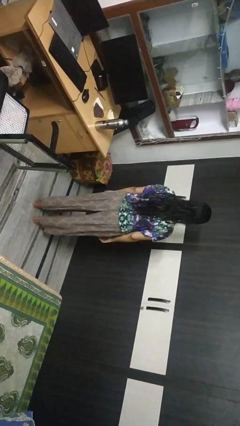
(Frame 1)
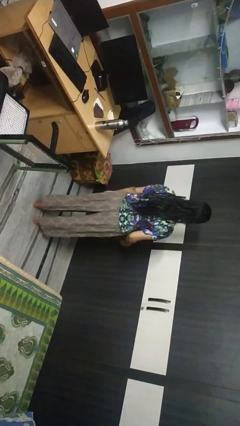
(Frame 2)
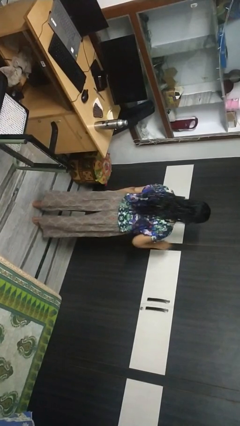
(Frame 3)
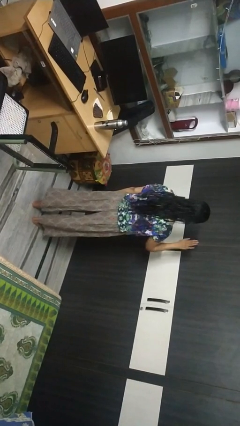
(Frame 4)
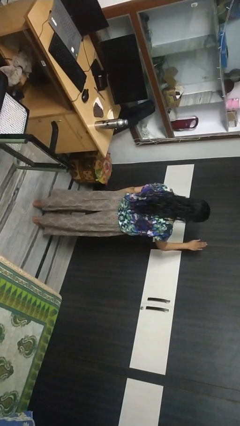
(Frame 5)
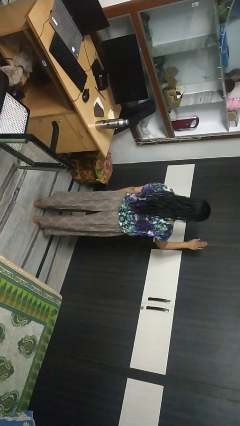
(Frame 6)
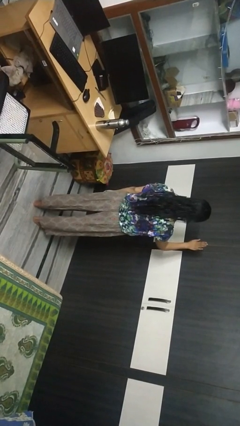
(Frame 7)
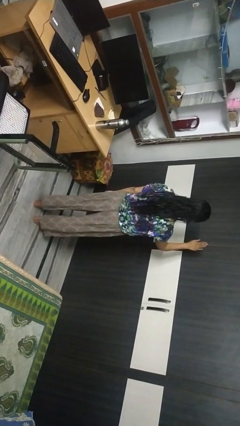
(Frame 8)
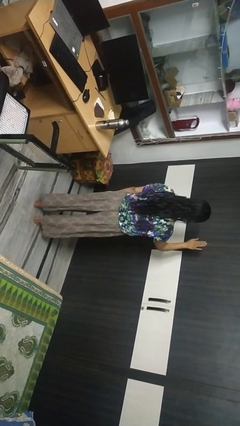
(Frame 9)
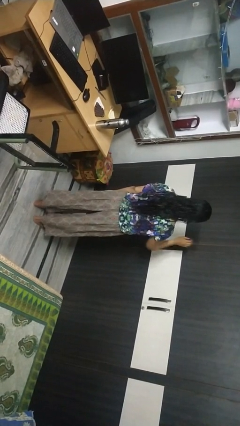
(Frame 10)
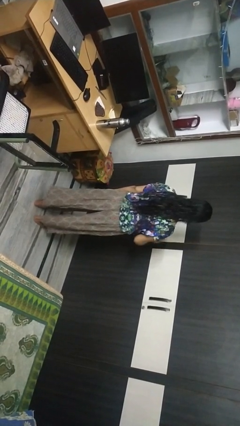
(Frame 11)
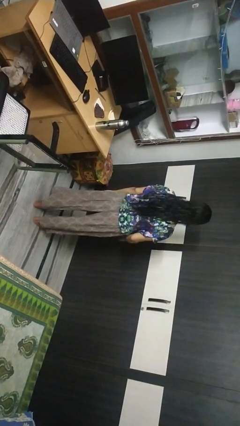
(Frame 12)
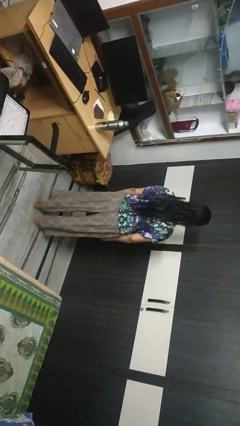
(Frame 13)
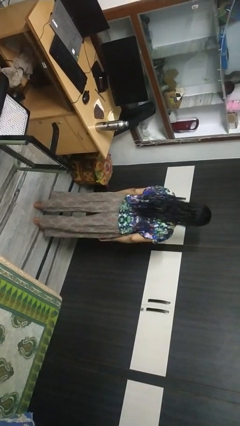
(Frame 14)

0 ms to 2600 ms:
person gestures stop

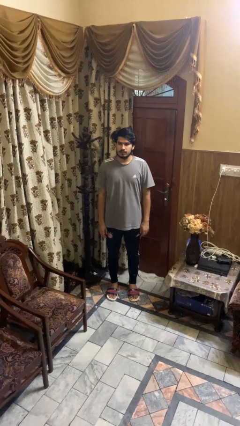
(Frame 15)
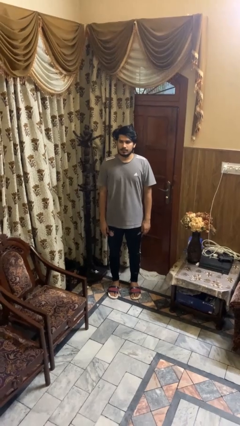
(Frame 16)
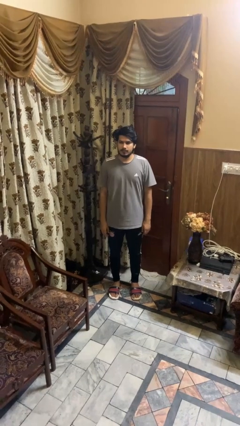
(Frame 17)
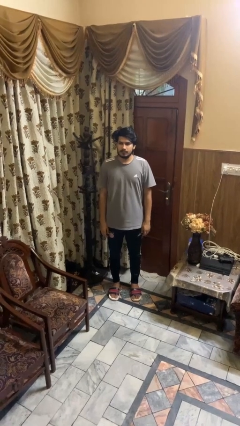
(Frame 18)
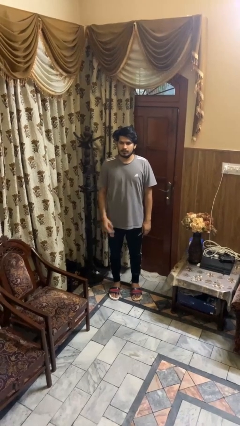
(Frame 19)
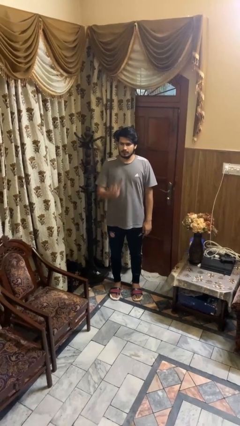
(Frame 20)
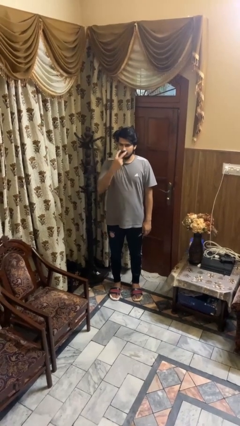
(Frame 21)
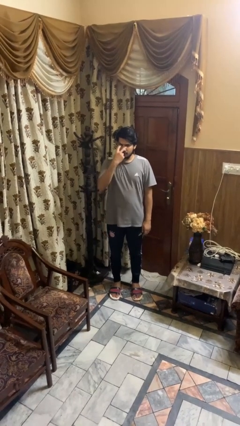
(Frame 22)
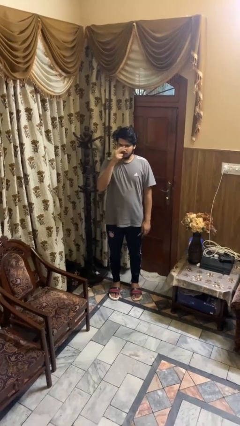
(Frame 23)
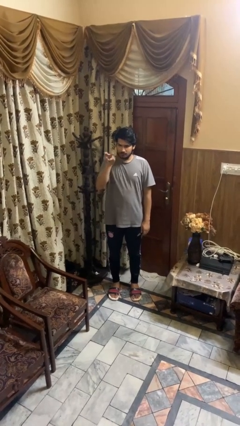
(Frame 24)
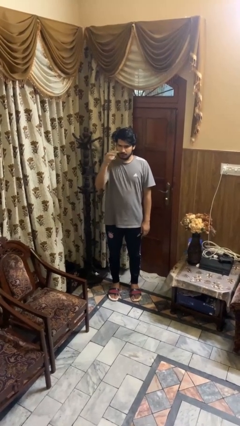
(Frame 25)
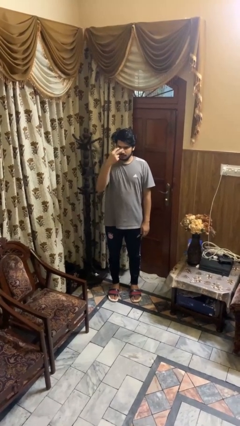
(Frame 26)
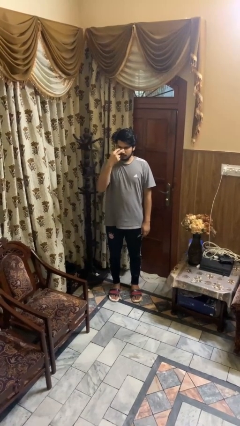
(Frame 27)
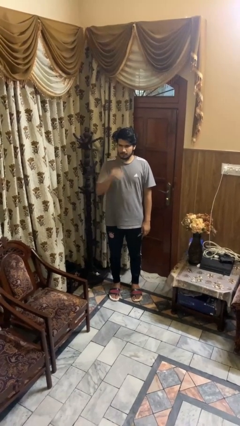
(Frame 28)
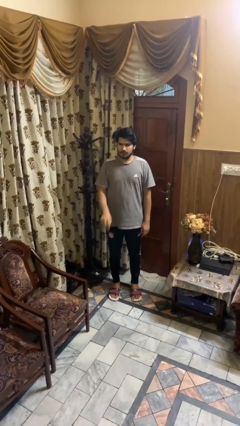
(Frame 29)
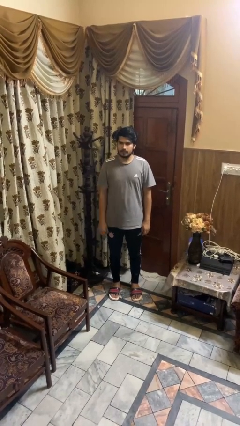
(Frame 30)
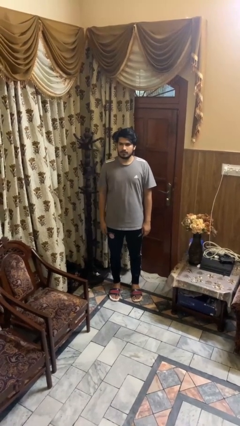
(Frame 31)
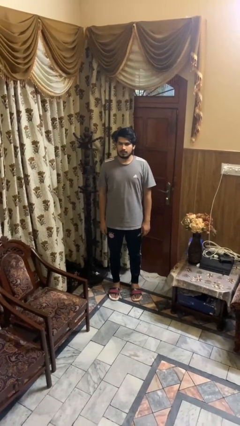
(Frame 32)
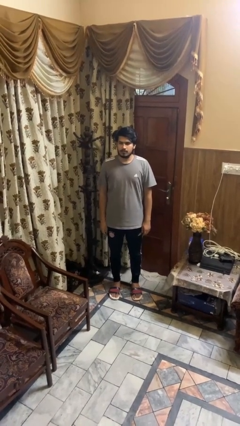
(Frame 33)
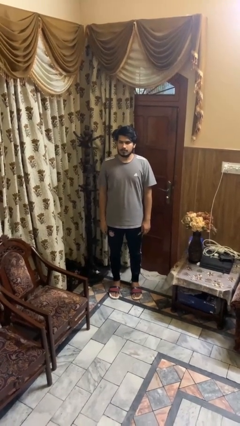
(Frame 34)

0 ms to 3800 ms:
person gestures watch closely

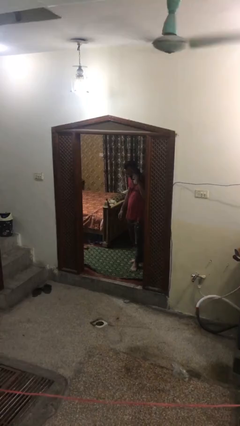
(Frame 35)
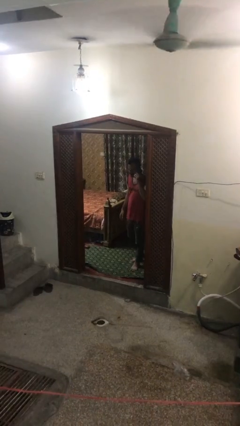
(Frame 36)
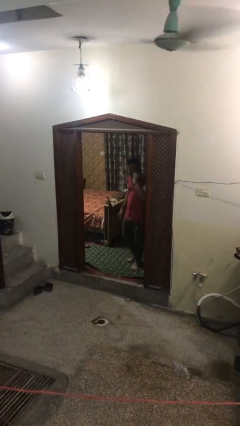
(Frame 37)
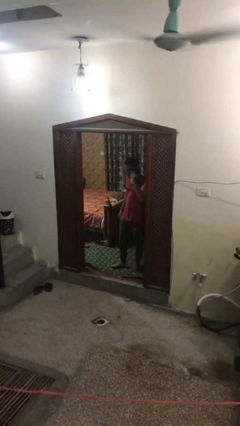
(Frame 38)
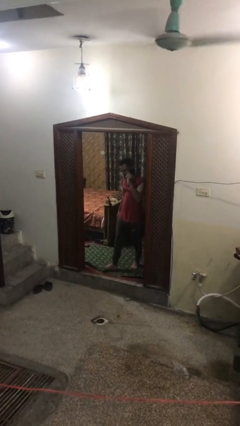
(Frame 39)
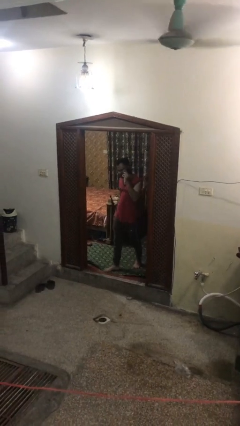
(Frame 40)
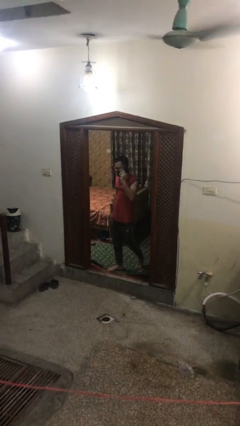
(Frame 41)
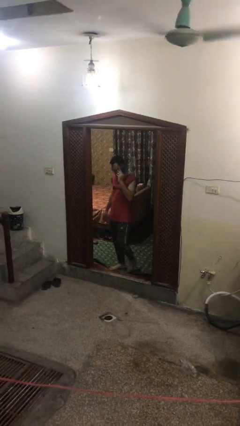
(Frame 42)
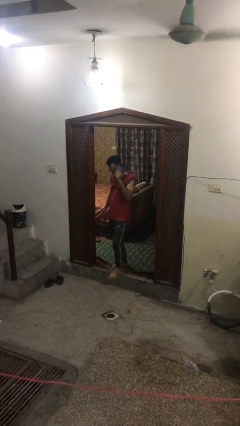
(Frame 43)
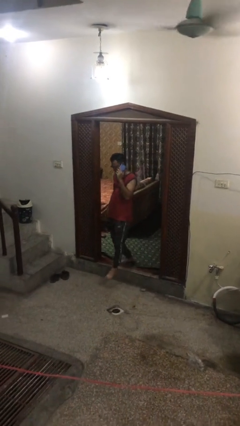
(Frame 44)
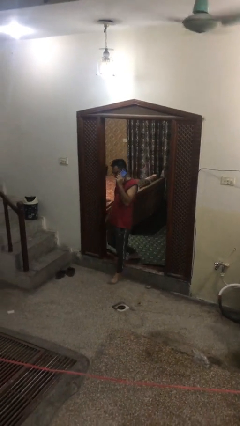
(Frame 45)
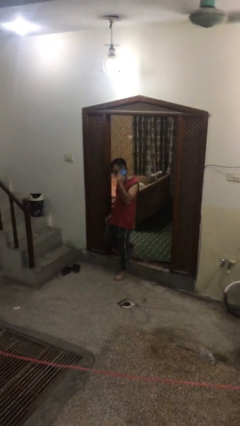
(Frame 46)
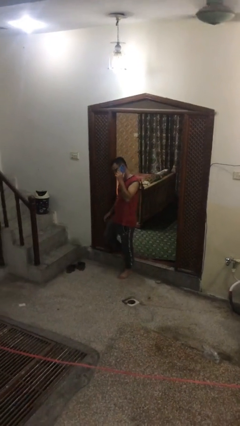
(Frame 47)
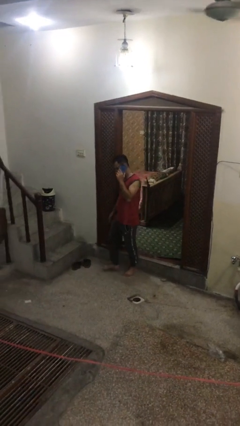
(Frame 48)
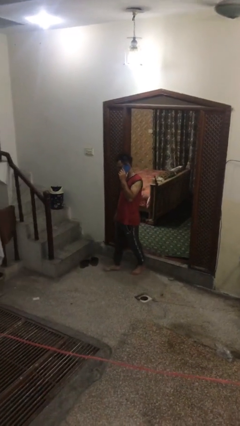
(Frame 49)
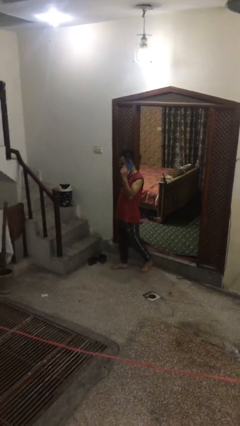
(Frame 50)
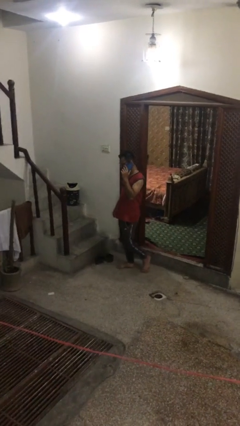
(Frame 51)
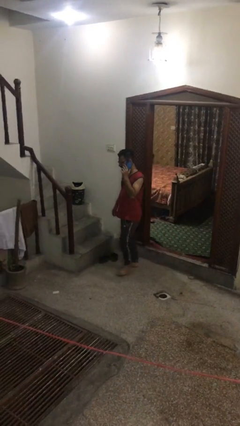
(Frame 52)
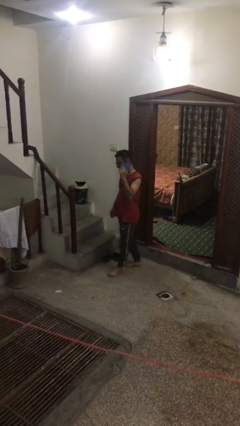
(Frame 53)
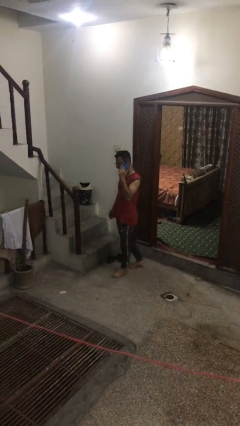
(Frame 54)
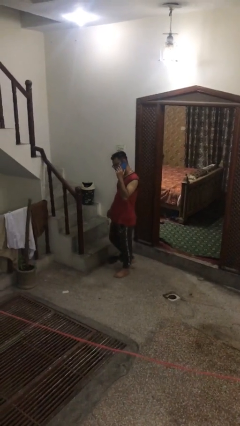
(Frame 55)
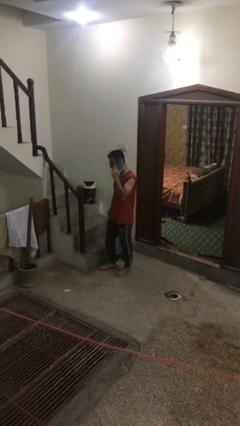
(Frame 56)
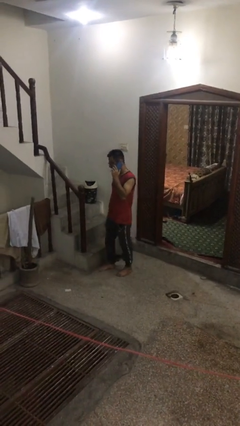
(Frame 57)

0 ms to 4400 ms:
person enters scene through structure

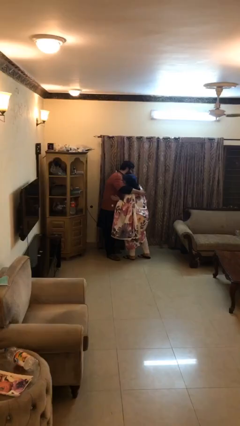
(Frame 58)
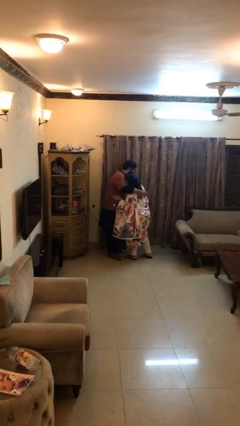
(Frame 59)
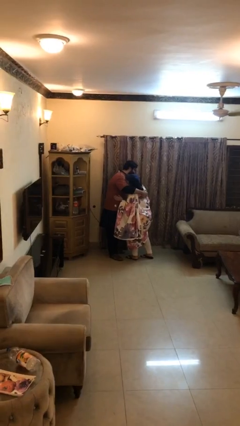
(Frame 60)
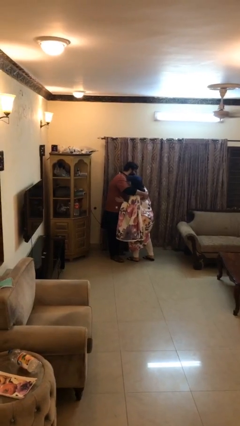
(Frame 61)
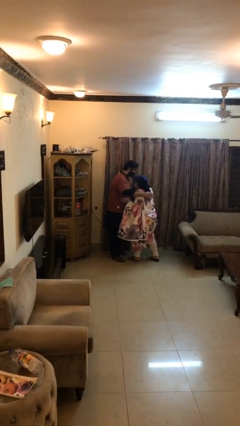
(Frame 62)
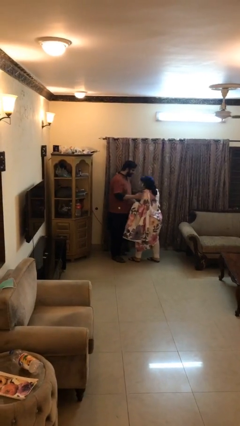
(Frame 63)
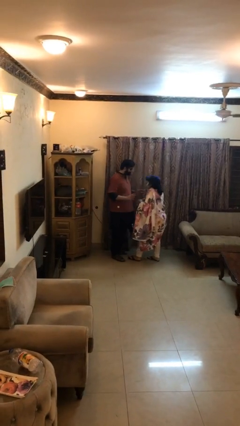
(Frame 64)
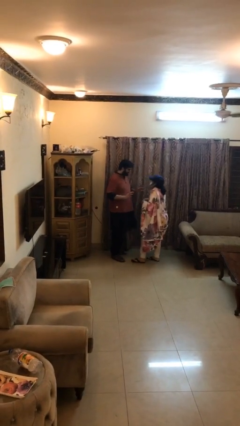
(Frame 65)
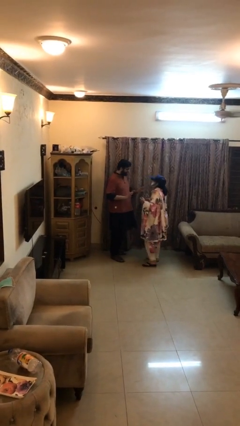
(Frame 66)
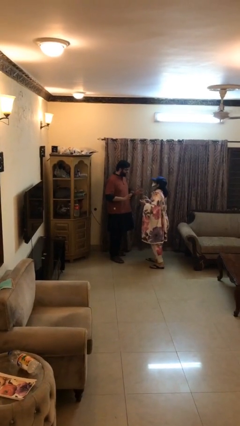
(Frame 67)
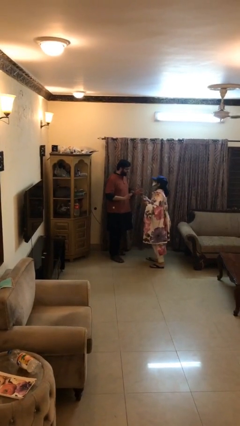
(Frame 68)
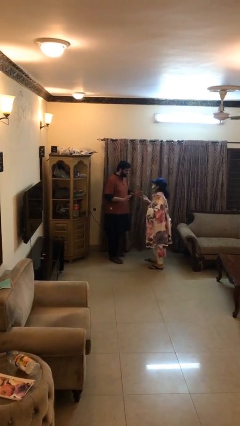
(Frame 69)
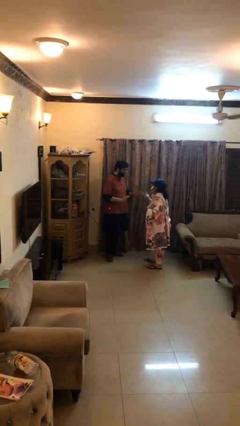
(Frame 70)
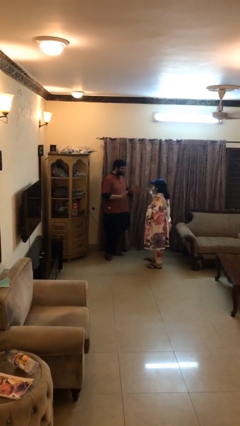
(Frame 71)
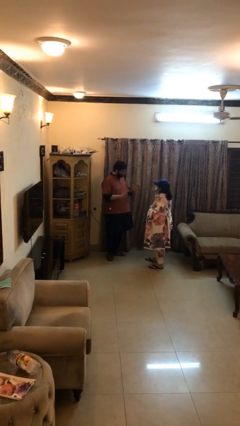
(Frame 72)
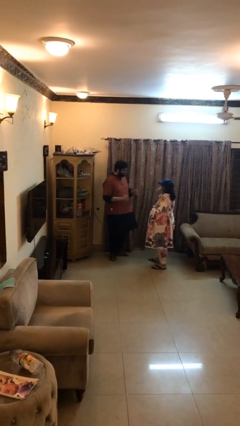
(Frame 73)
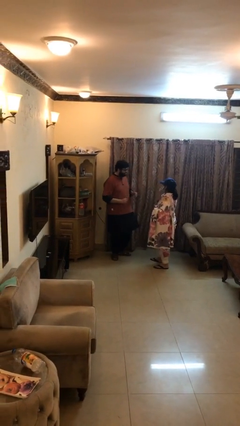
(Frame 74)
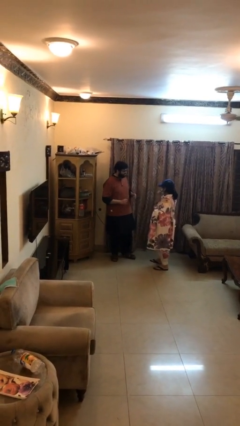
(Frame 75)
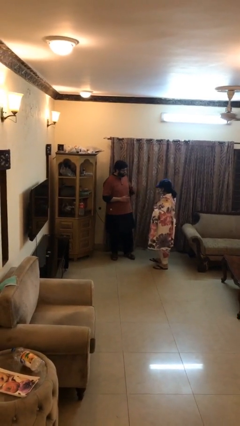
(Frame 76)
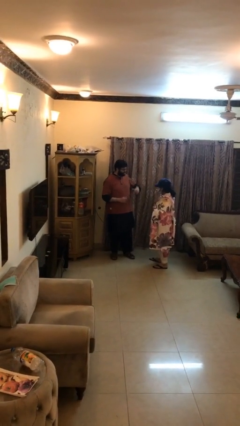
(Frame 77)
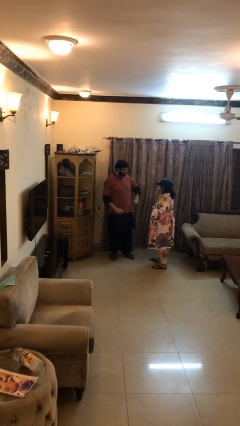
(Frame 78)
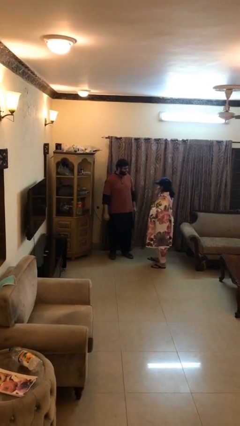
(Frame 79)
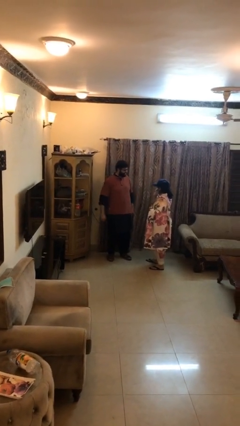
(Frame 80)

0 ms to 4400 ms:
person talks to person

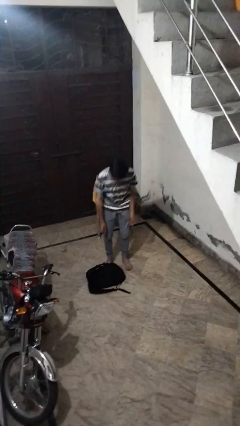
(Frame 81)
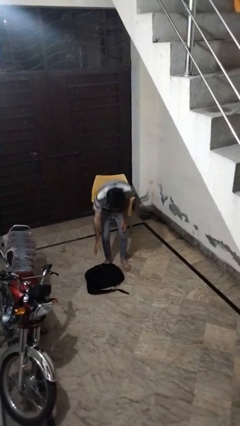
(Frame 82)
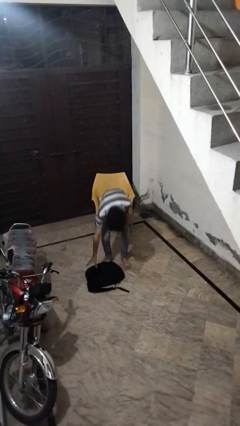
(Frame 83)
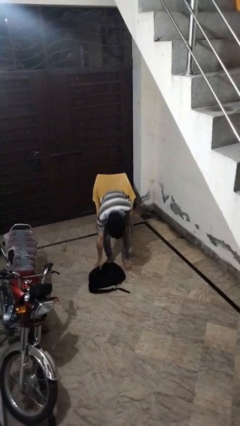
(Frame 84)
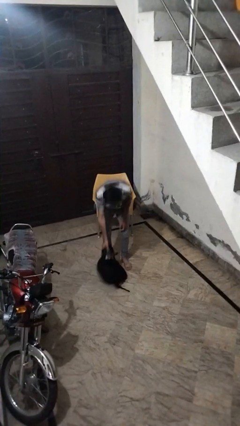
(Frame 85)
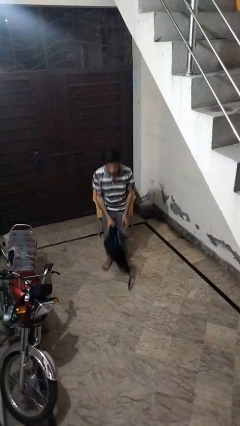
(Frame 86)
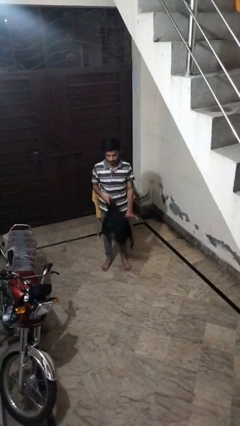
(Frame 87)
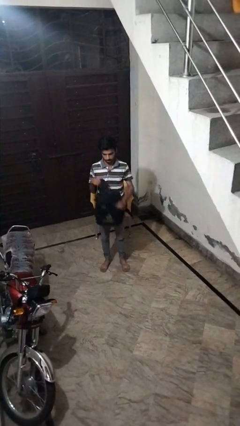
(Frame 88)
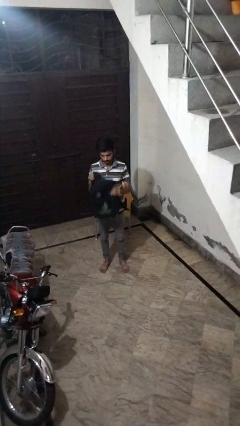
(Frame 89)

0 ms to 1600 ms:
person picks up object from floor

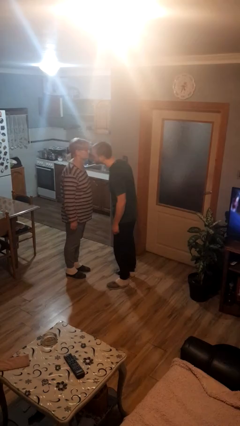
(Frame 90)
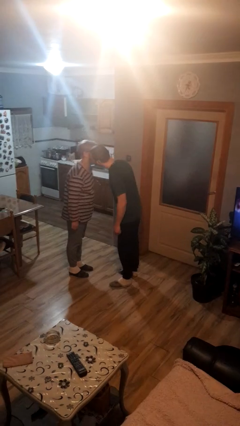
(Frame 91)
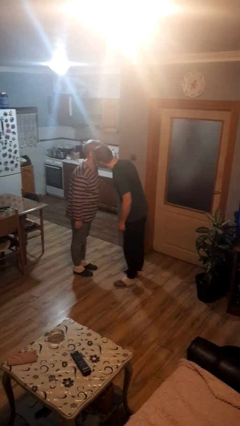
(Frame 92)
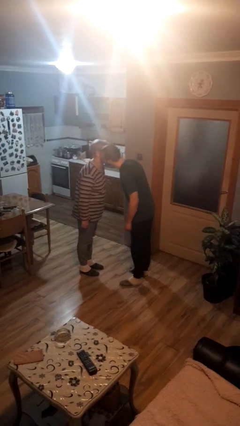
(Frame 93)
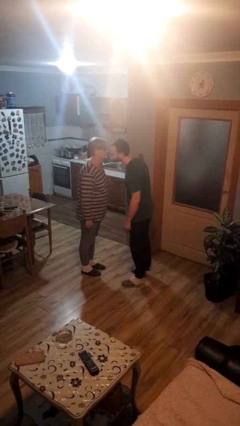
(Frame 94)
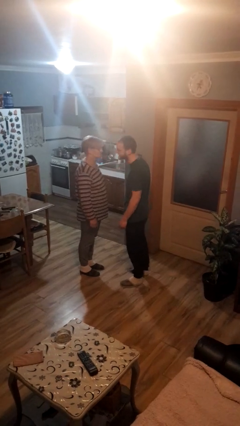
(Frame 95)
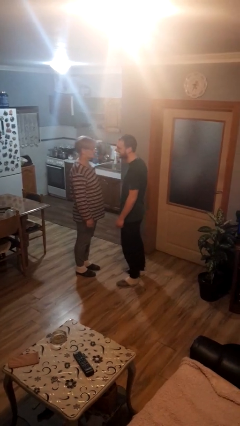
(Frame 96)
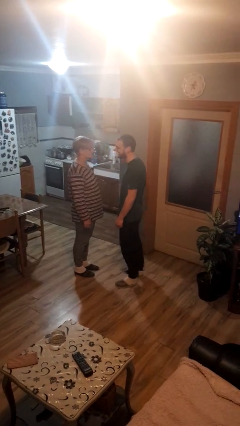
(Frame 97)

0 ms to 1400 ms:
person kisses cheek of person
